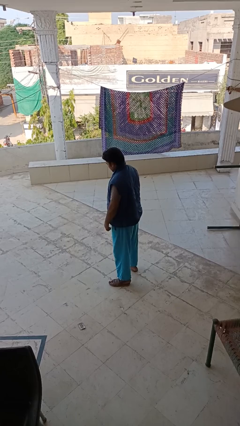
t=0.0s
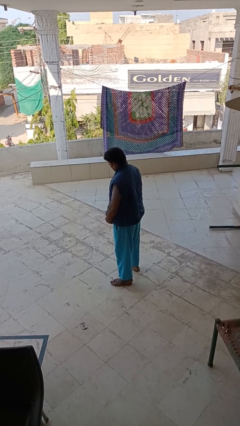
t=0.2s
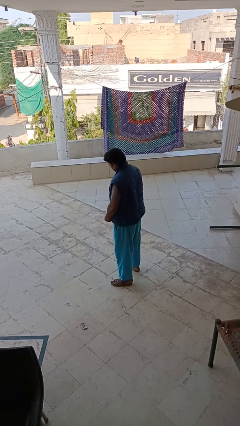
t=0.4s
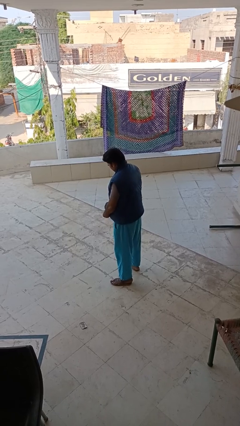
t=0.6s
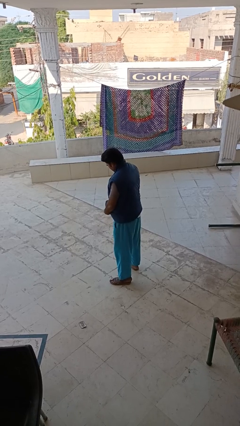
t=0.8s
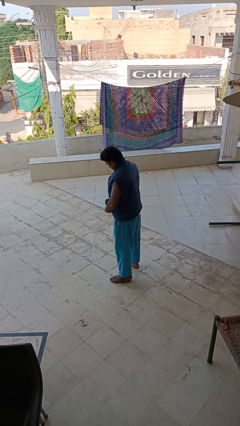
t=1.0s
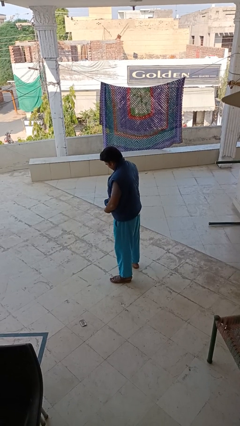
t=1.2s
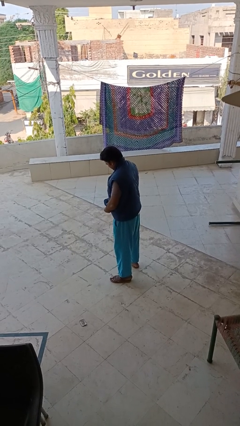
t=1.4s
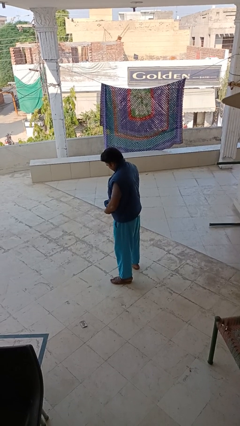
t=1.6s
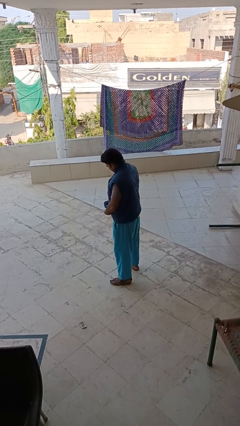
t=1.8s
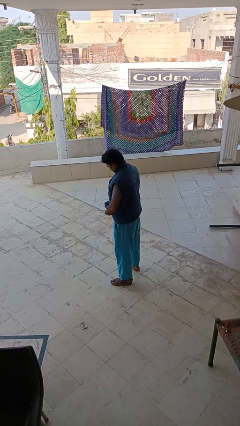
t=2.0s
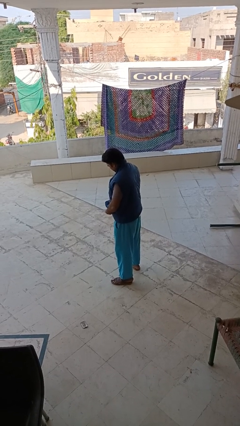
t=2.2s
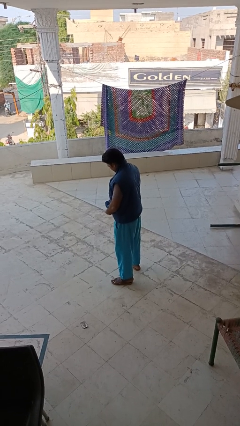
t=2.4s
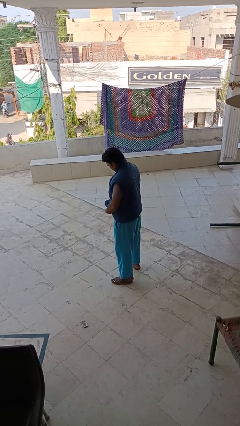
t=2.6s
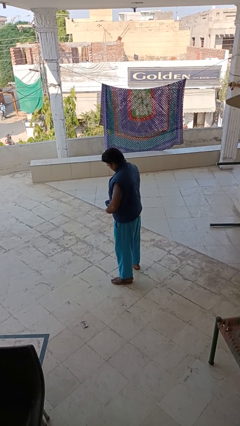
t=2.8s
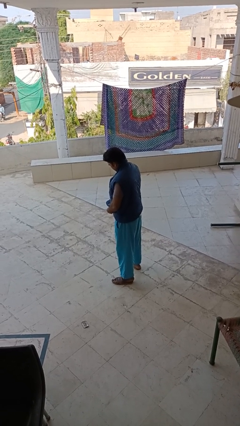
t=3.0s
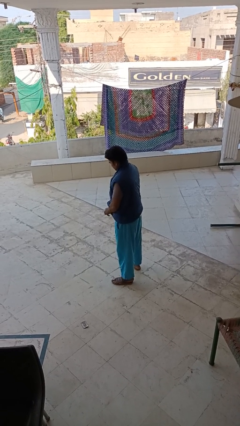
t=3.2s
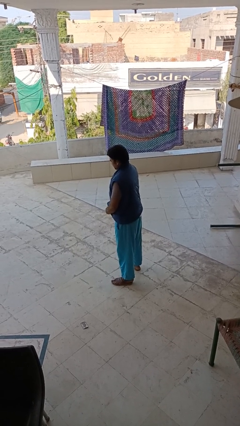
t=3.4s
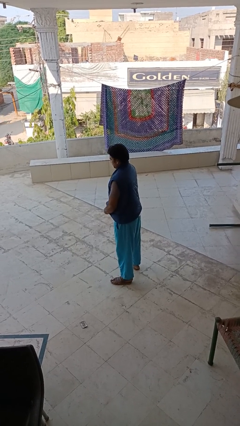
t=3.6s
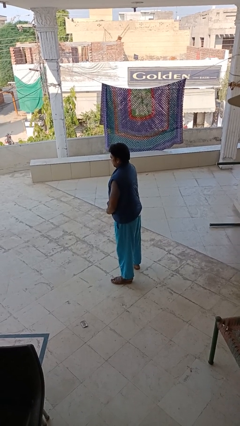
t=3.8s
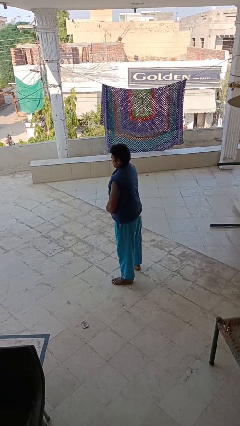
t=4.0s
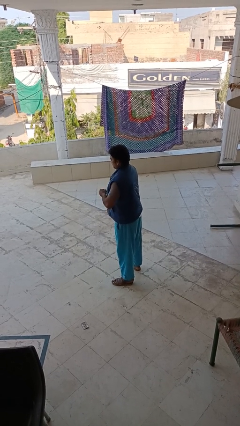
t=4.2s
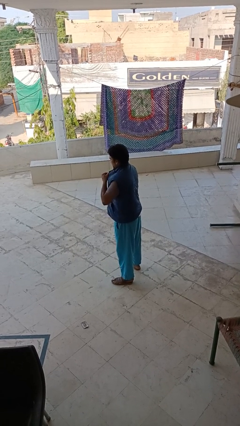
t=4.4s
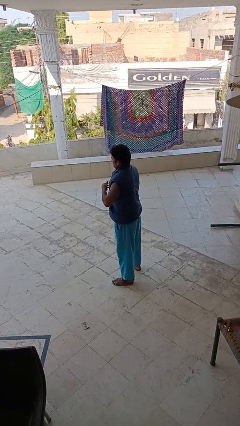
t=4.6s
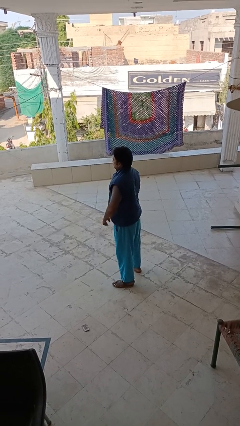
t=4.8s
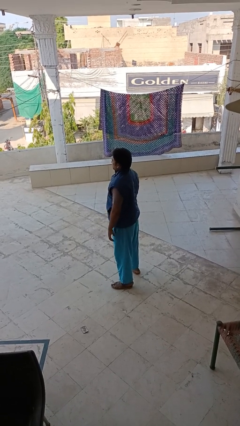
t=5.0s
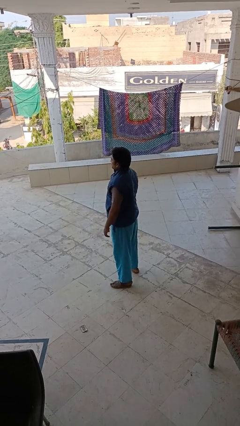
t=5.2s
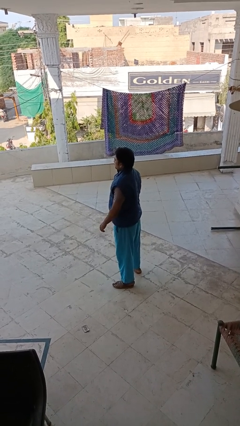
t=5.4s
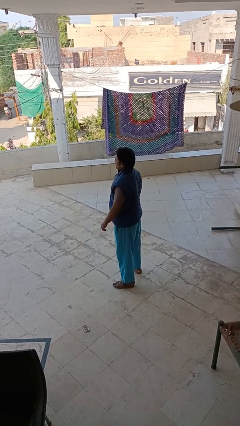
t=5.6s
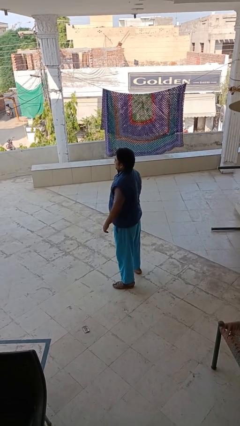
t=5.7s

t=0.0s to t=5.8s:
person zips up jacket

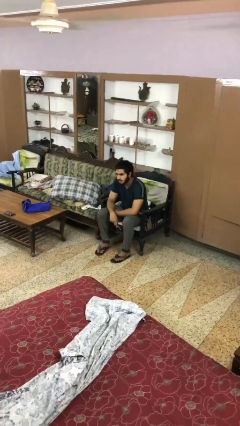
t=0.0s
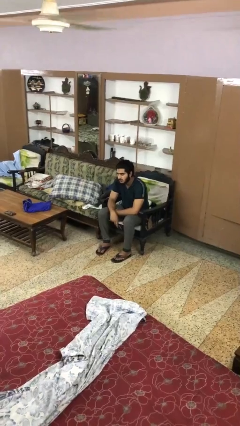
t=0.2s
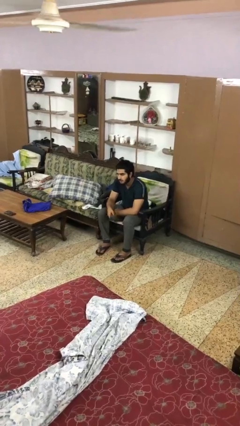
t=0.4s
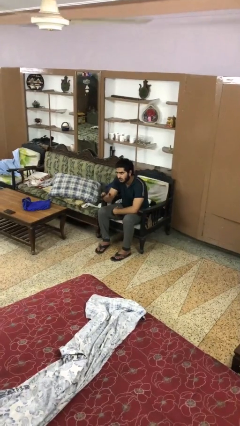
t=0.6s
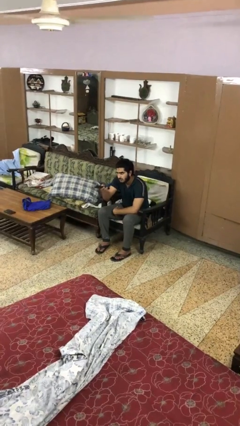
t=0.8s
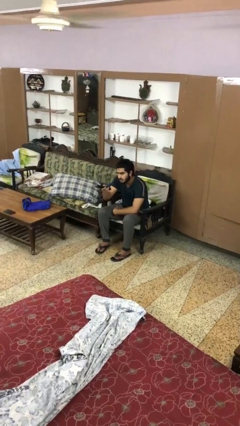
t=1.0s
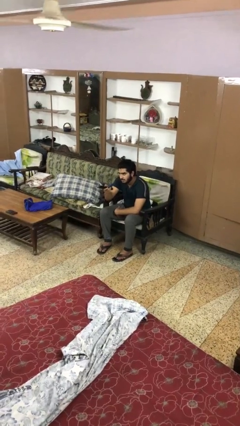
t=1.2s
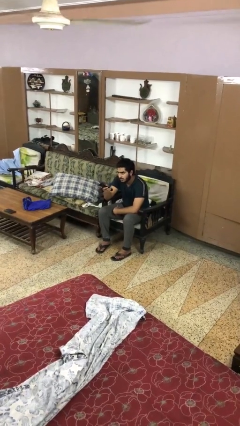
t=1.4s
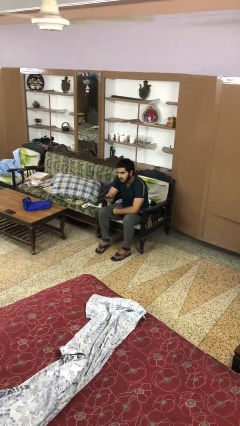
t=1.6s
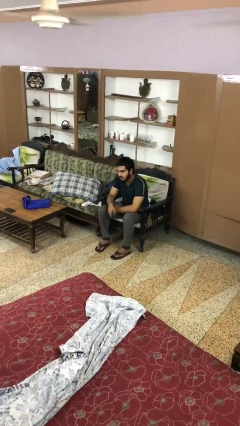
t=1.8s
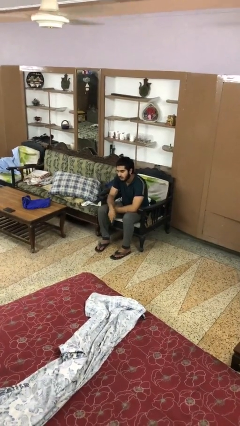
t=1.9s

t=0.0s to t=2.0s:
person uses television remote

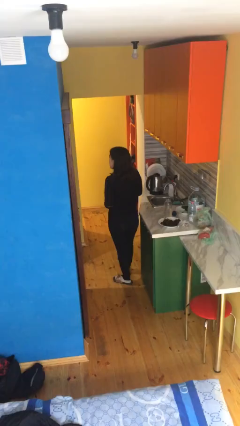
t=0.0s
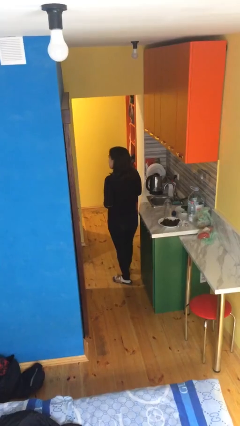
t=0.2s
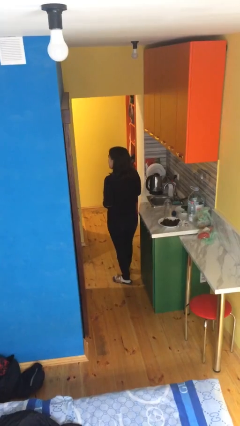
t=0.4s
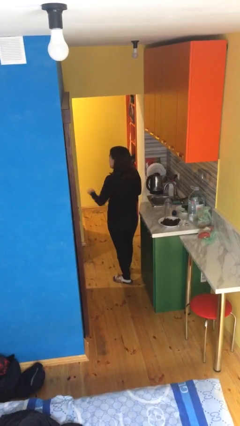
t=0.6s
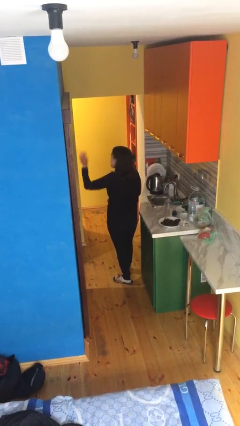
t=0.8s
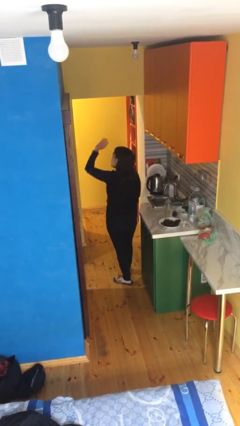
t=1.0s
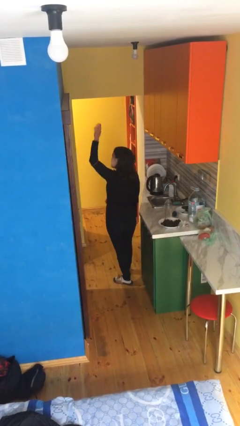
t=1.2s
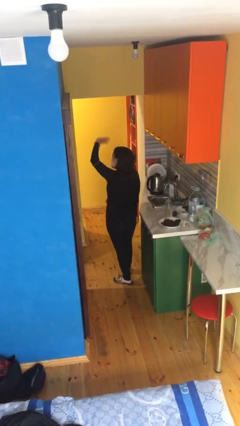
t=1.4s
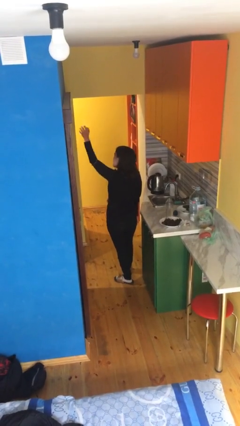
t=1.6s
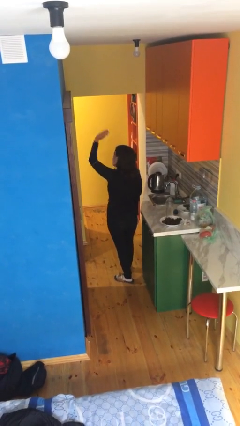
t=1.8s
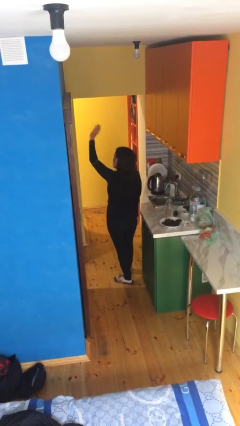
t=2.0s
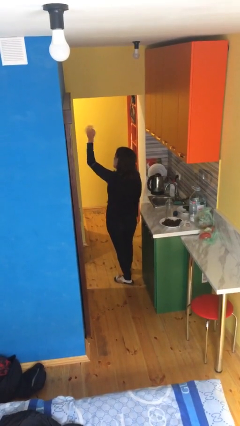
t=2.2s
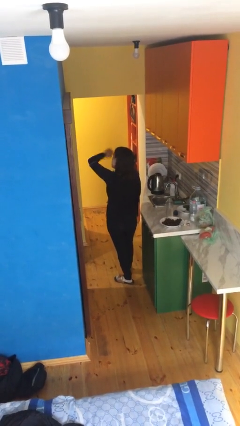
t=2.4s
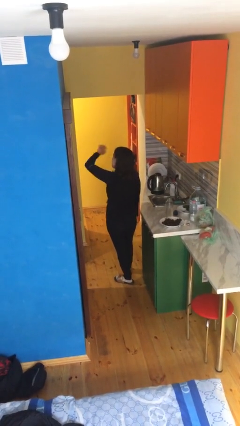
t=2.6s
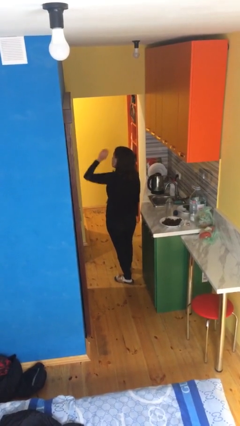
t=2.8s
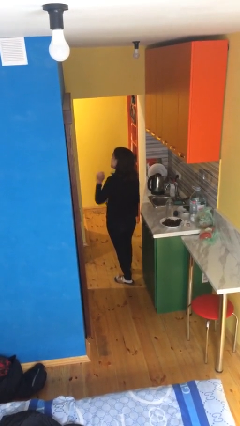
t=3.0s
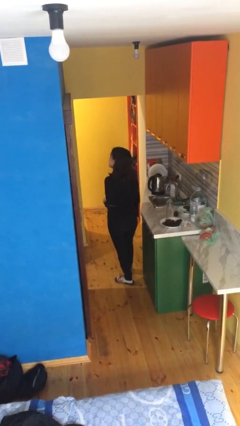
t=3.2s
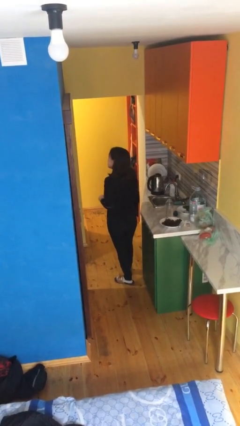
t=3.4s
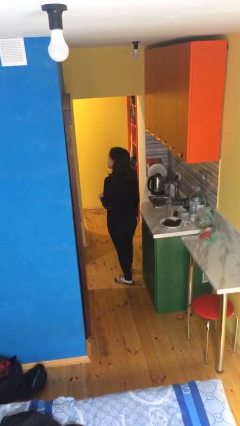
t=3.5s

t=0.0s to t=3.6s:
person waves at person

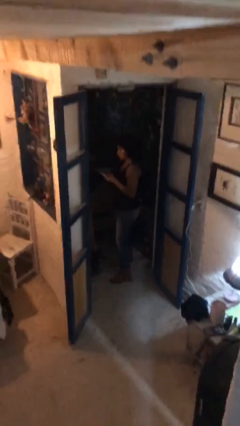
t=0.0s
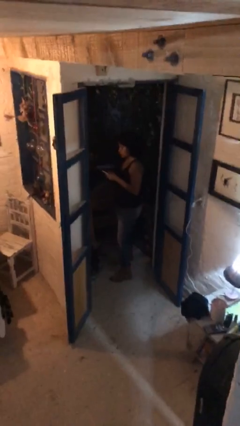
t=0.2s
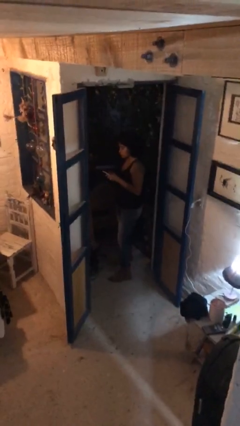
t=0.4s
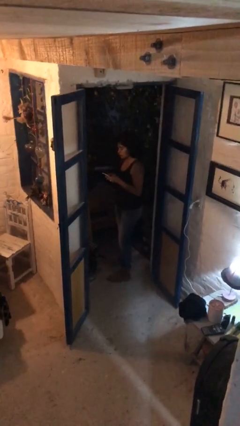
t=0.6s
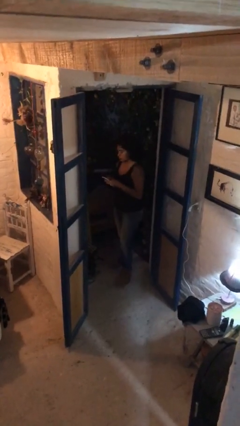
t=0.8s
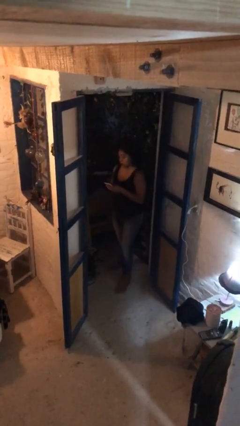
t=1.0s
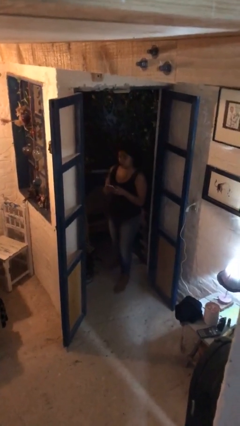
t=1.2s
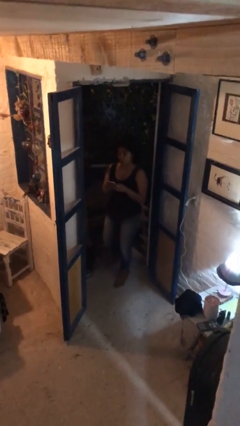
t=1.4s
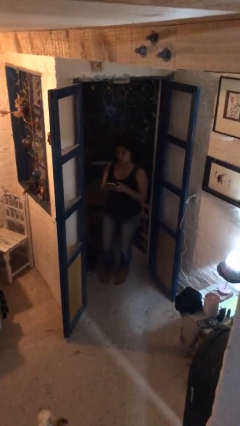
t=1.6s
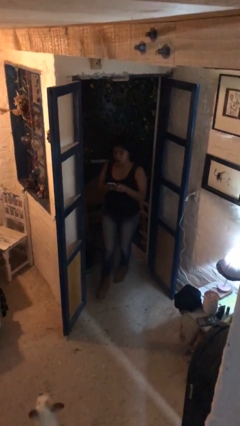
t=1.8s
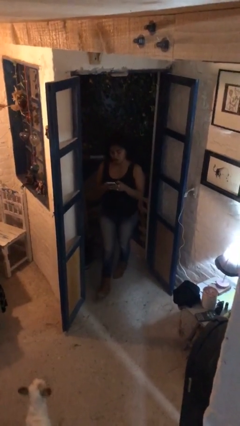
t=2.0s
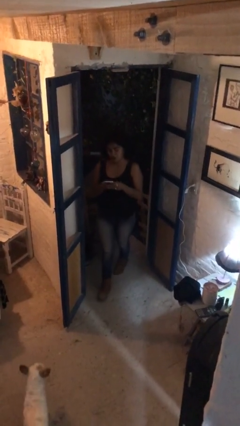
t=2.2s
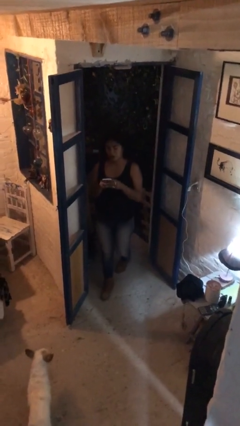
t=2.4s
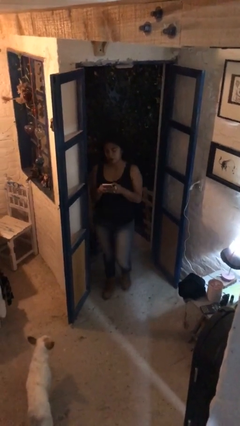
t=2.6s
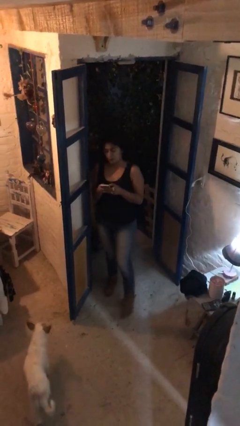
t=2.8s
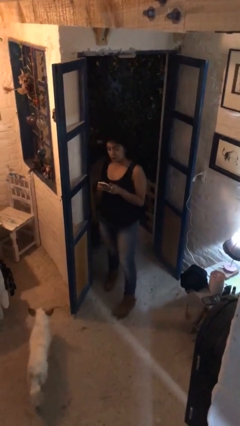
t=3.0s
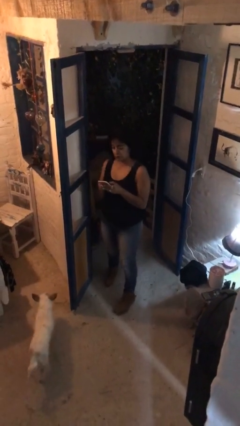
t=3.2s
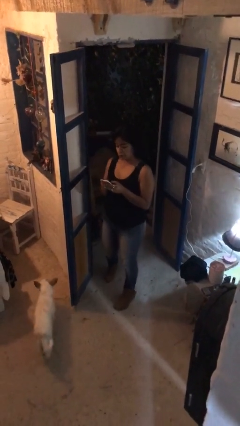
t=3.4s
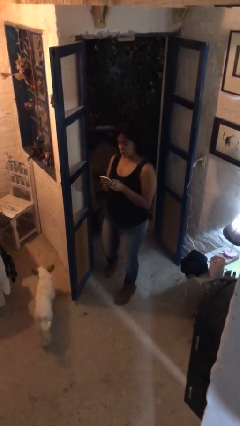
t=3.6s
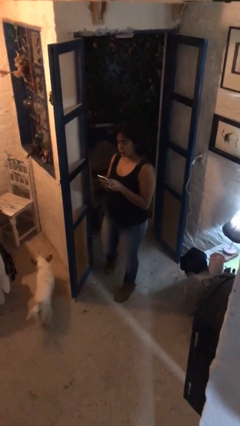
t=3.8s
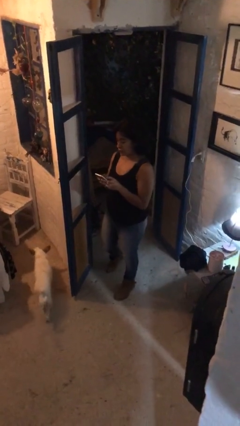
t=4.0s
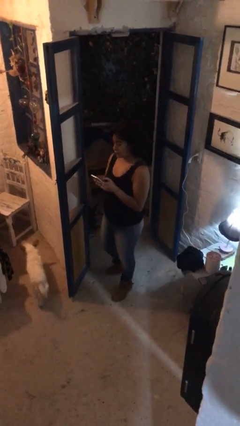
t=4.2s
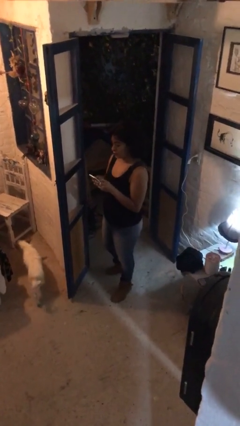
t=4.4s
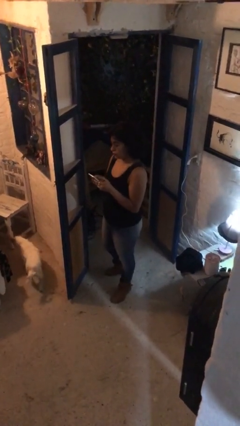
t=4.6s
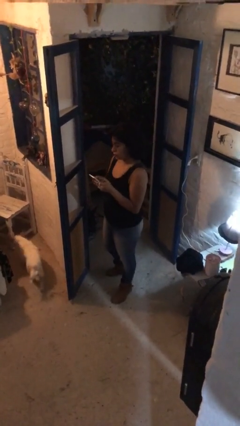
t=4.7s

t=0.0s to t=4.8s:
person enters scene through structure

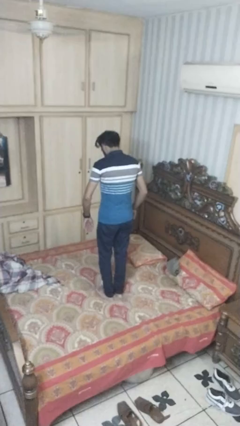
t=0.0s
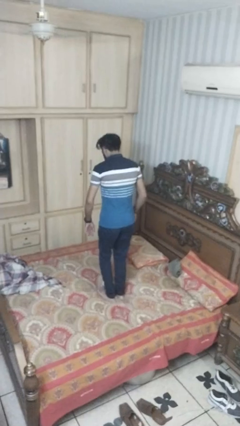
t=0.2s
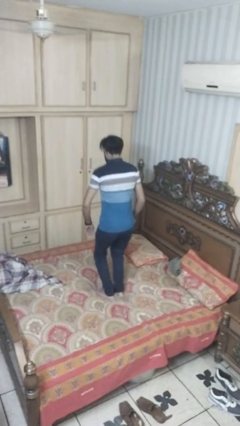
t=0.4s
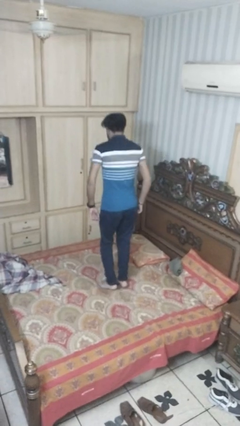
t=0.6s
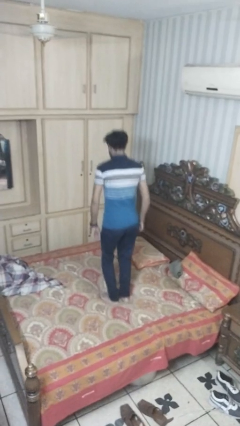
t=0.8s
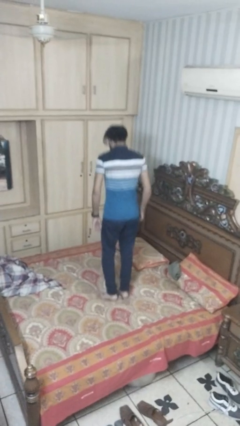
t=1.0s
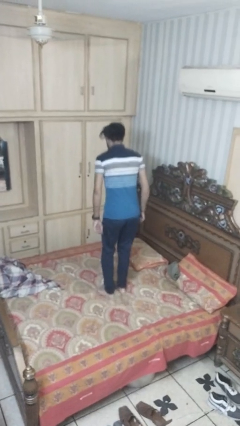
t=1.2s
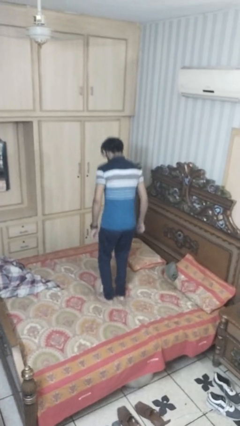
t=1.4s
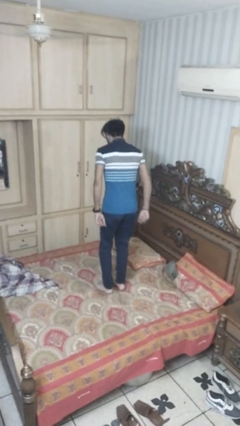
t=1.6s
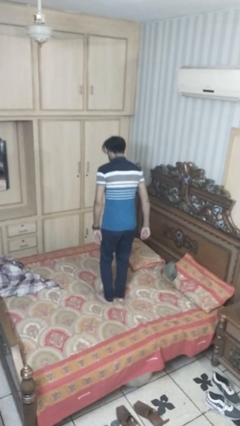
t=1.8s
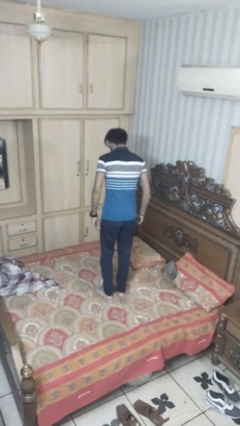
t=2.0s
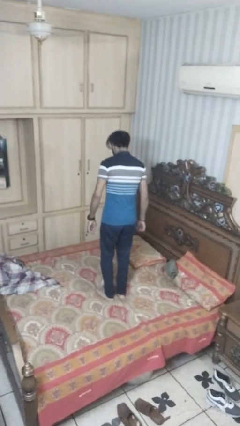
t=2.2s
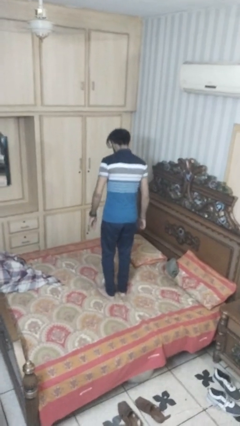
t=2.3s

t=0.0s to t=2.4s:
person jumps on bed
